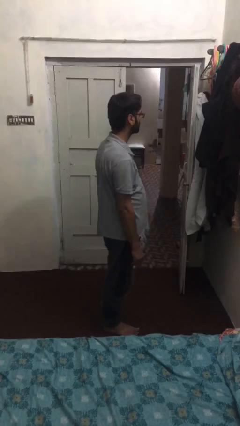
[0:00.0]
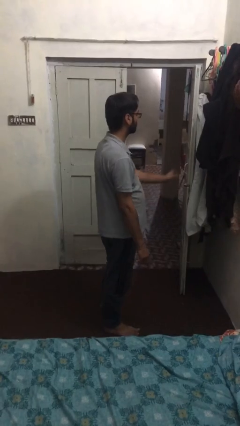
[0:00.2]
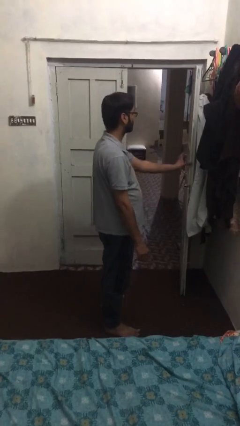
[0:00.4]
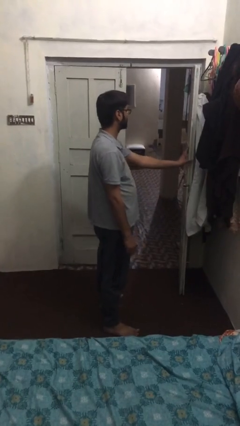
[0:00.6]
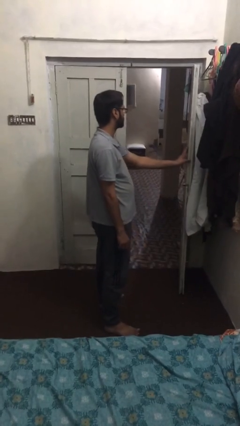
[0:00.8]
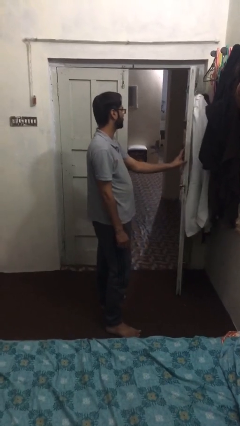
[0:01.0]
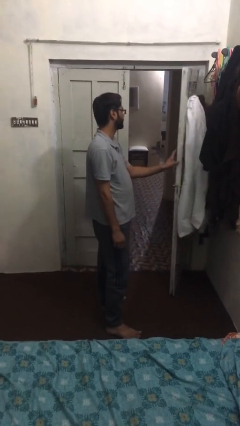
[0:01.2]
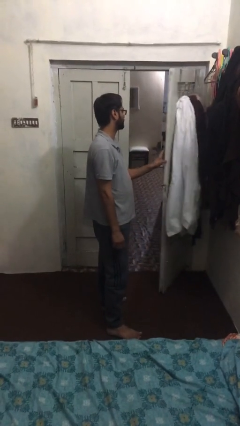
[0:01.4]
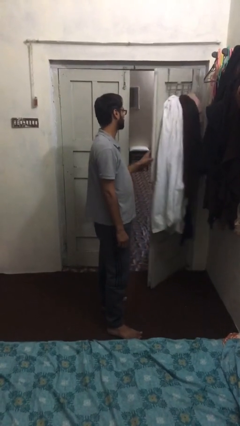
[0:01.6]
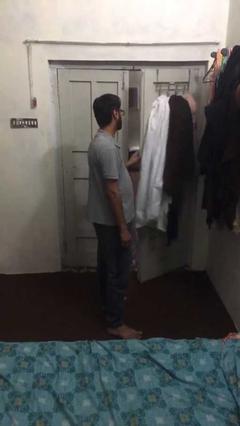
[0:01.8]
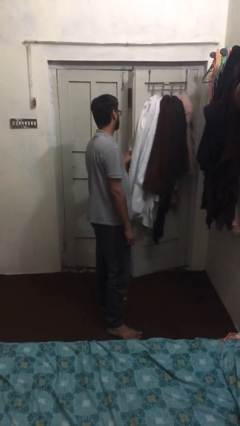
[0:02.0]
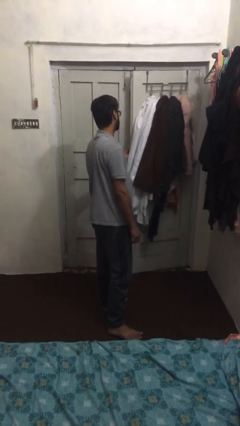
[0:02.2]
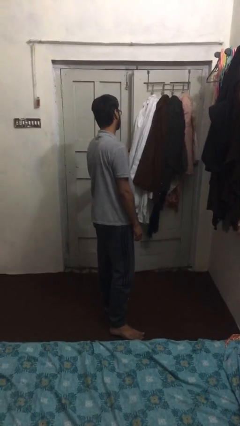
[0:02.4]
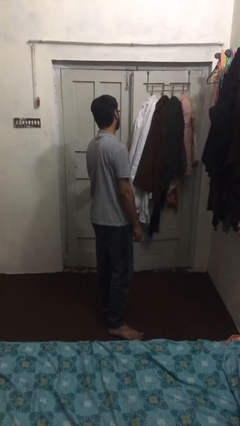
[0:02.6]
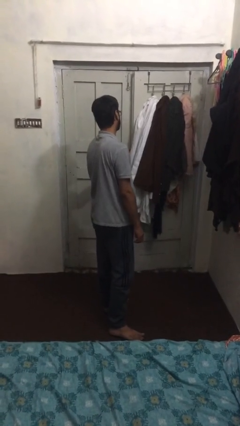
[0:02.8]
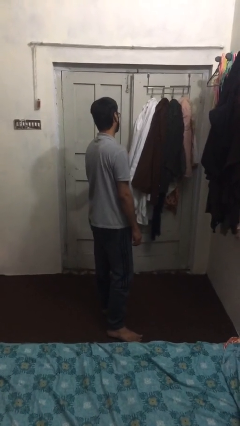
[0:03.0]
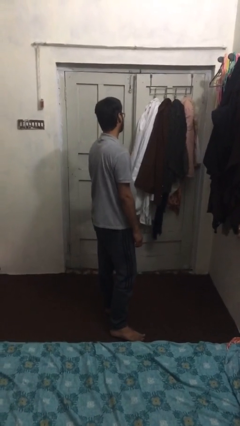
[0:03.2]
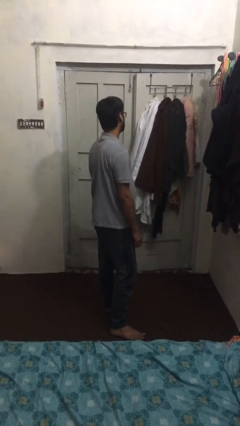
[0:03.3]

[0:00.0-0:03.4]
person closes facility door

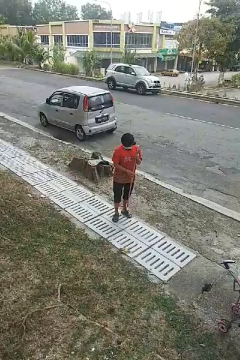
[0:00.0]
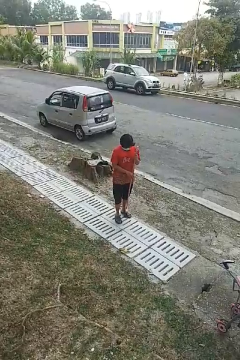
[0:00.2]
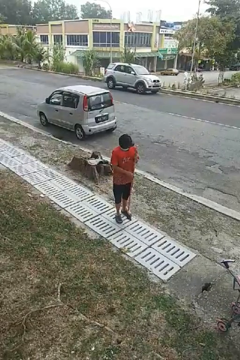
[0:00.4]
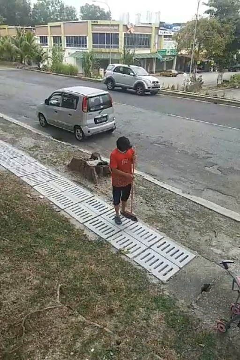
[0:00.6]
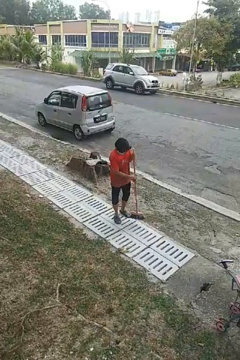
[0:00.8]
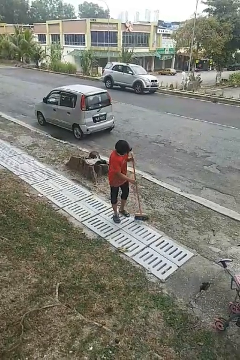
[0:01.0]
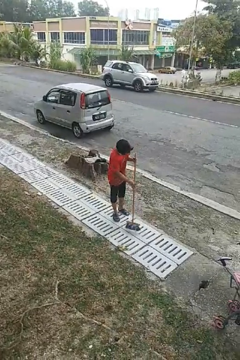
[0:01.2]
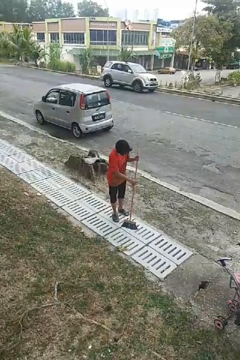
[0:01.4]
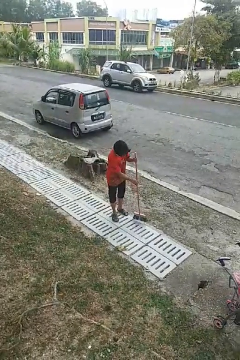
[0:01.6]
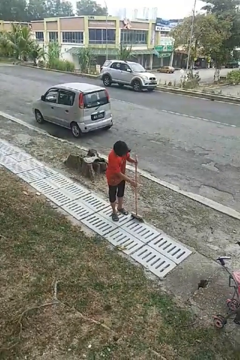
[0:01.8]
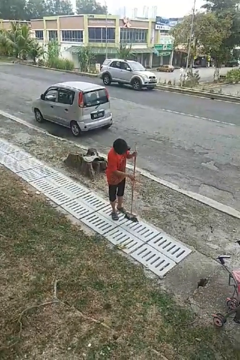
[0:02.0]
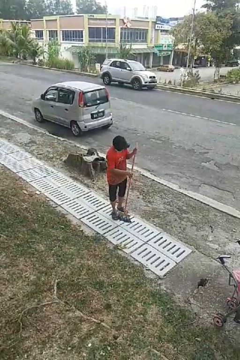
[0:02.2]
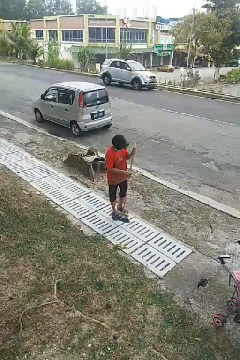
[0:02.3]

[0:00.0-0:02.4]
person sweeps floor

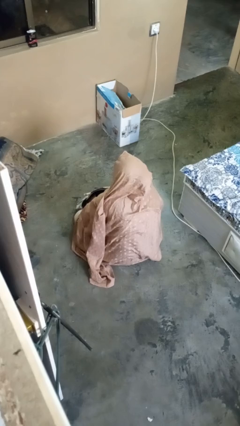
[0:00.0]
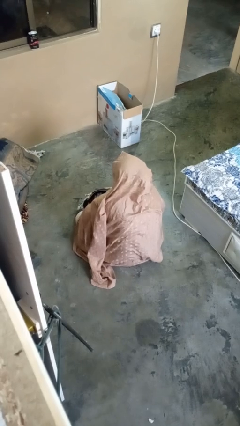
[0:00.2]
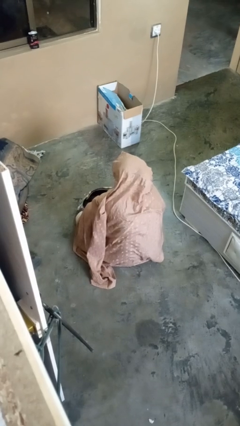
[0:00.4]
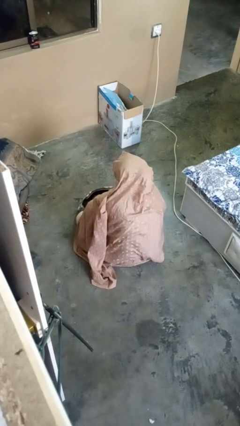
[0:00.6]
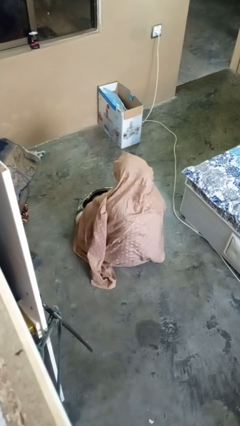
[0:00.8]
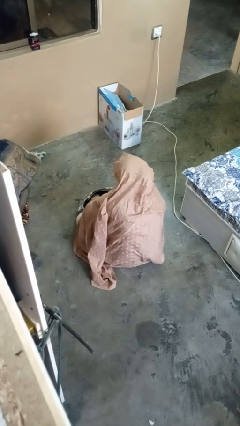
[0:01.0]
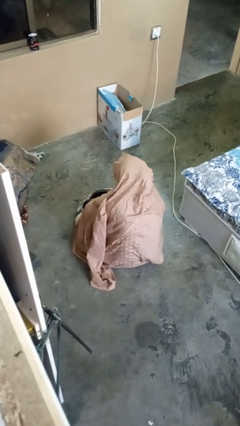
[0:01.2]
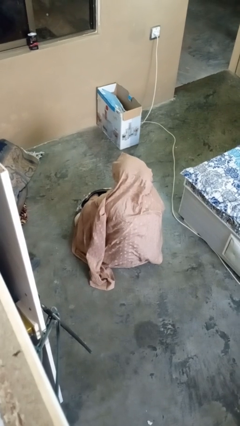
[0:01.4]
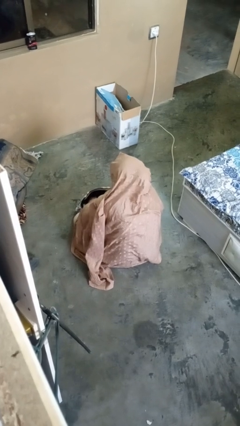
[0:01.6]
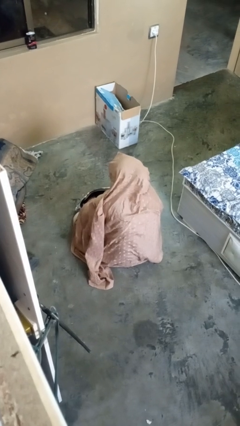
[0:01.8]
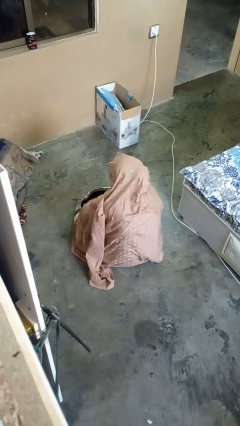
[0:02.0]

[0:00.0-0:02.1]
person searches in purse

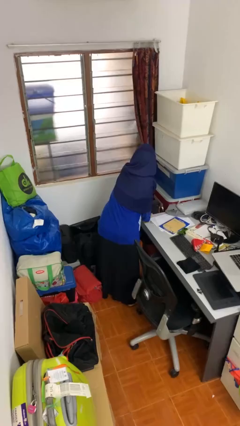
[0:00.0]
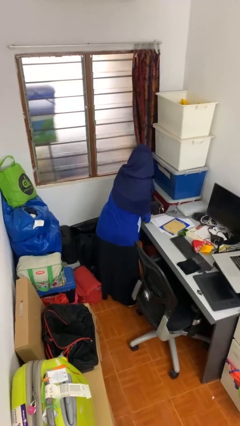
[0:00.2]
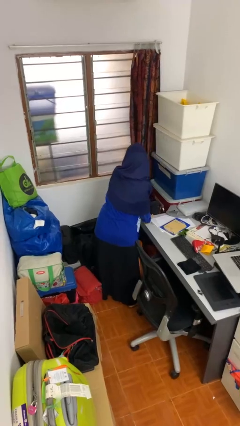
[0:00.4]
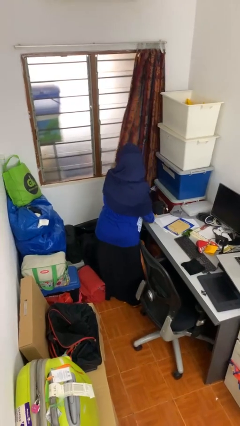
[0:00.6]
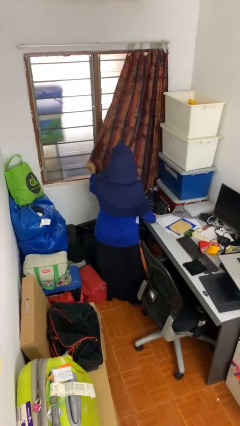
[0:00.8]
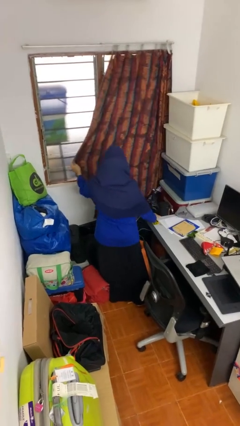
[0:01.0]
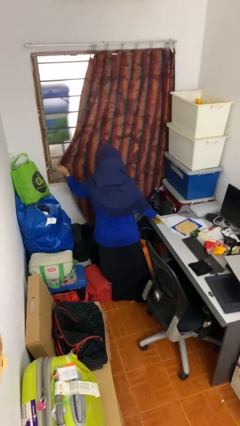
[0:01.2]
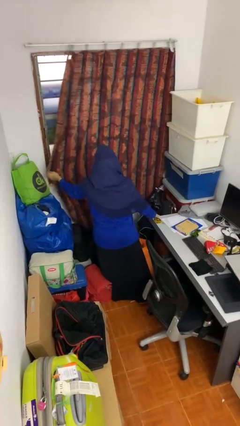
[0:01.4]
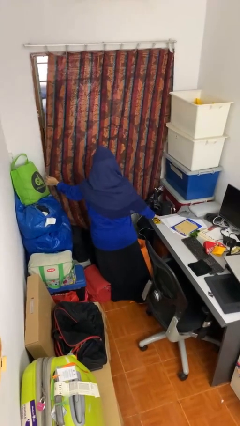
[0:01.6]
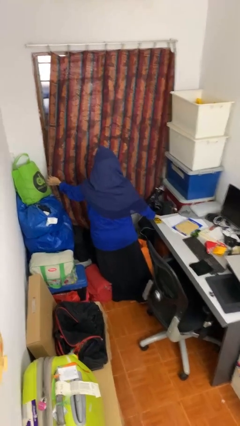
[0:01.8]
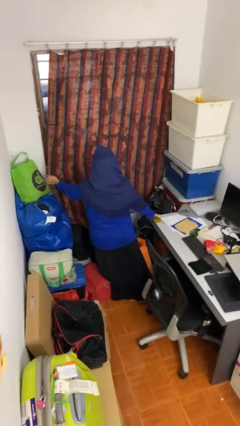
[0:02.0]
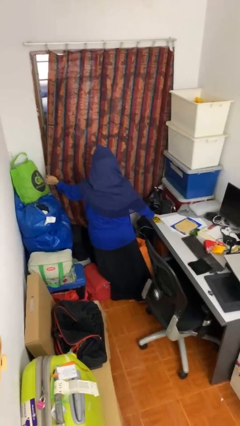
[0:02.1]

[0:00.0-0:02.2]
person closes curtains

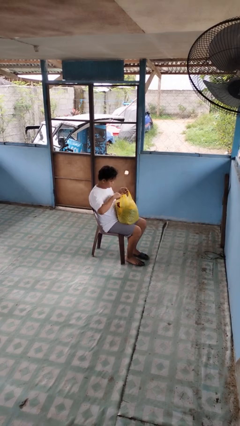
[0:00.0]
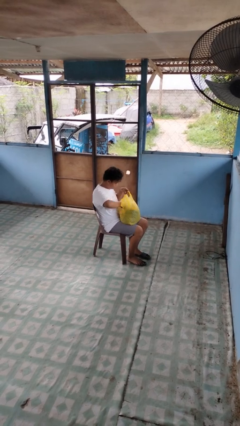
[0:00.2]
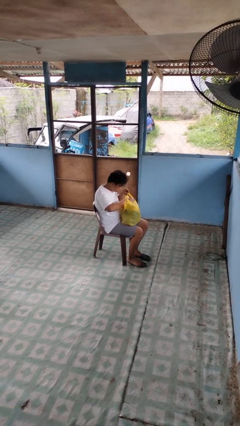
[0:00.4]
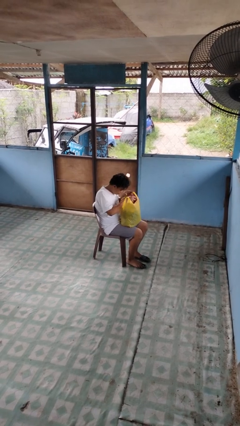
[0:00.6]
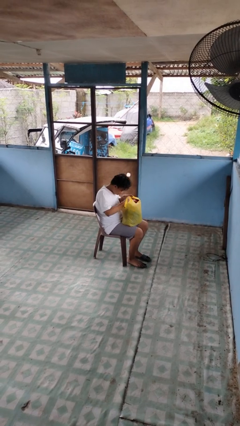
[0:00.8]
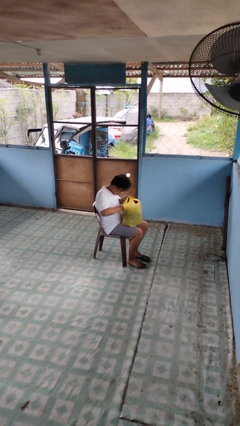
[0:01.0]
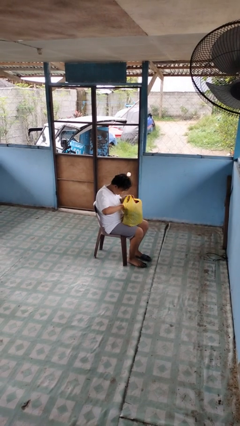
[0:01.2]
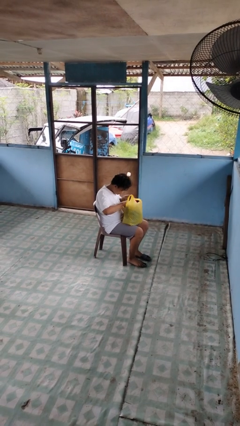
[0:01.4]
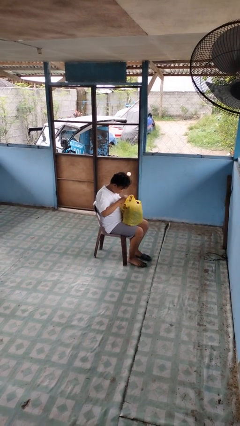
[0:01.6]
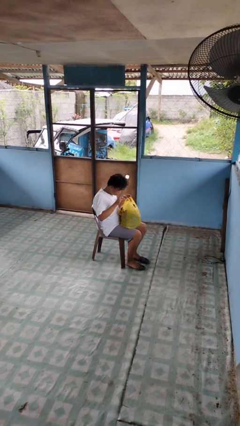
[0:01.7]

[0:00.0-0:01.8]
person searches in bag

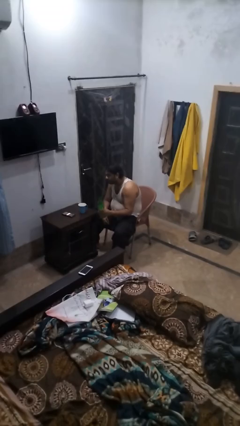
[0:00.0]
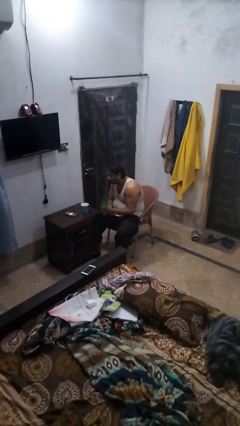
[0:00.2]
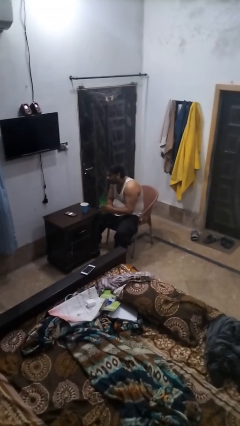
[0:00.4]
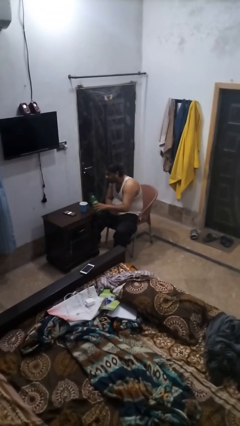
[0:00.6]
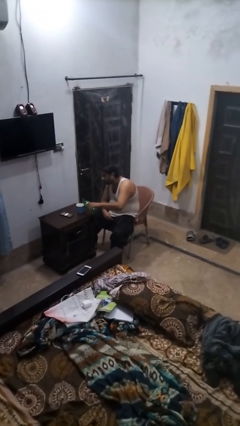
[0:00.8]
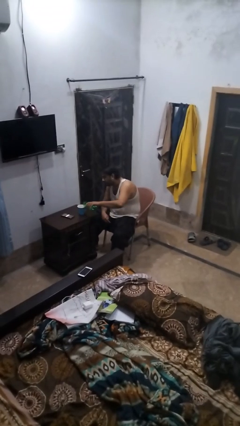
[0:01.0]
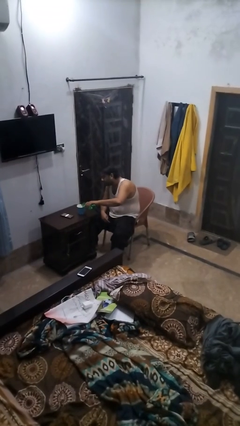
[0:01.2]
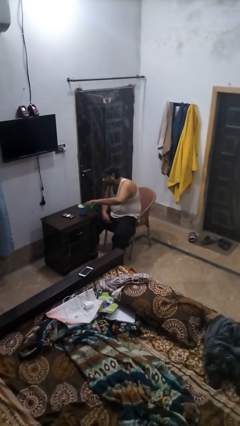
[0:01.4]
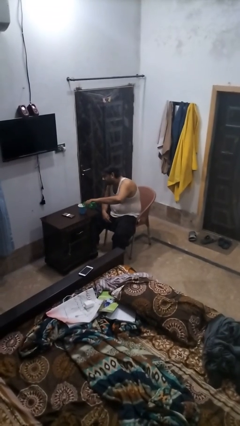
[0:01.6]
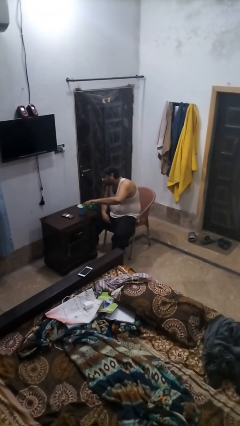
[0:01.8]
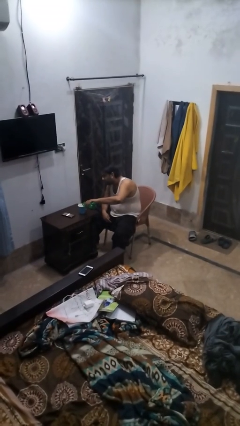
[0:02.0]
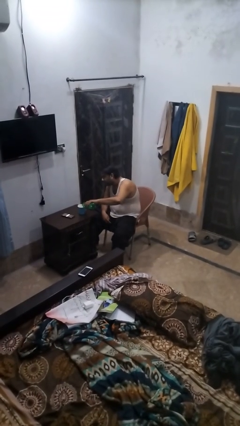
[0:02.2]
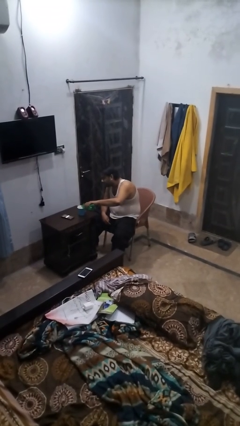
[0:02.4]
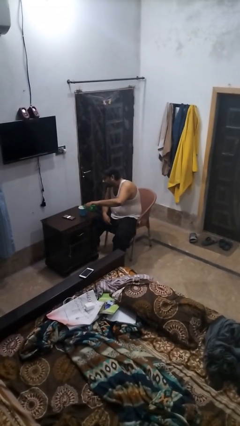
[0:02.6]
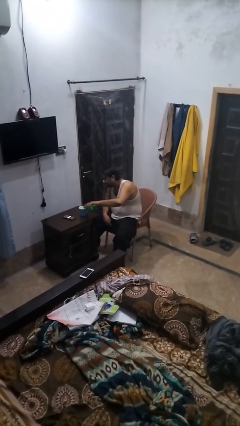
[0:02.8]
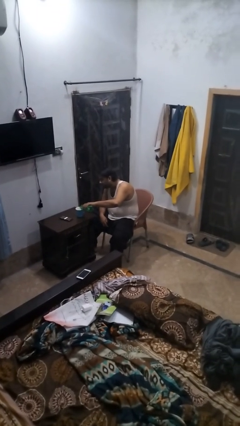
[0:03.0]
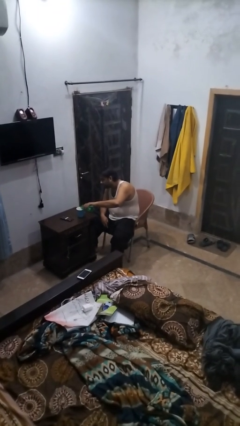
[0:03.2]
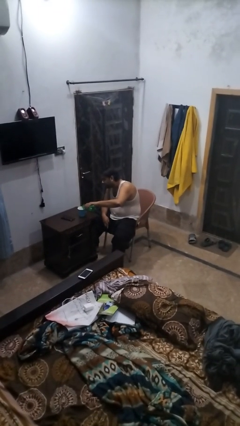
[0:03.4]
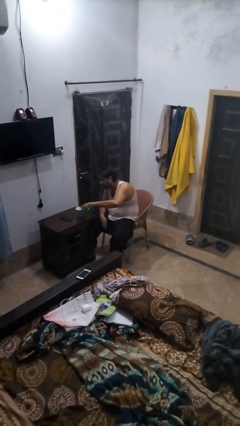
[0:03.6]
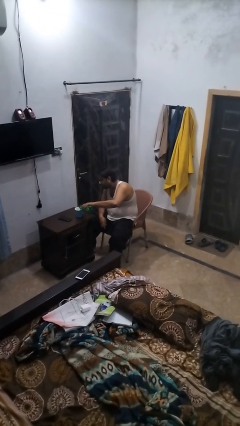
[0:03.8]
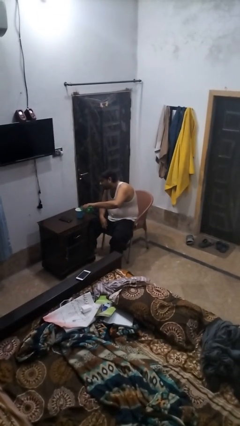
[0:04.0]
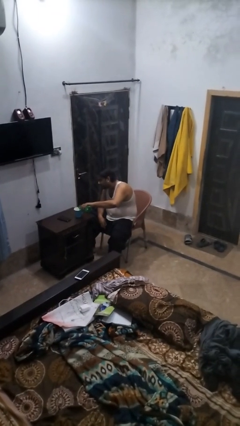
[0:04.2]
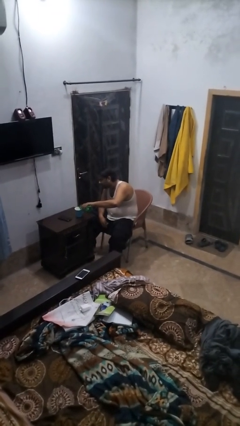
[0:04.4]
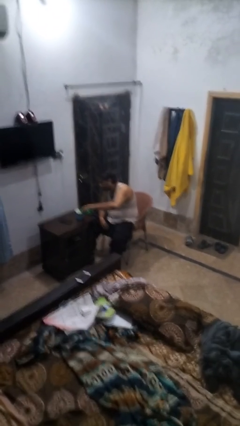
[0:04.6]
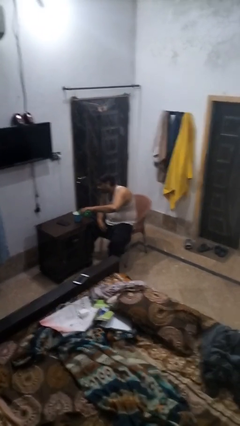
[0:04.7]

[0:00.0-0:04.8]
person pours liquid into cup

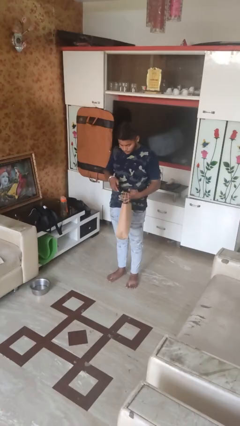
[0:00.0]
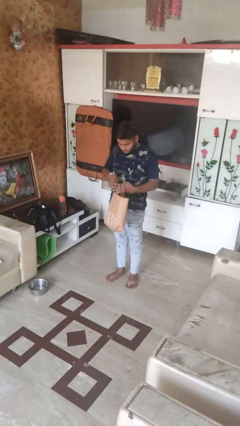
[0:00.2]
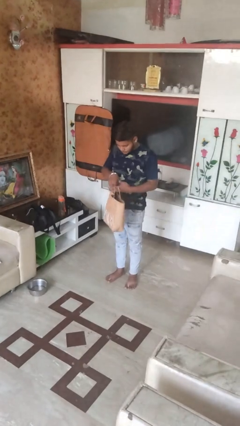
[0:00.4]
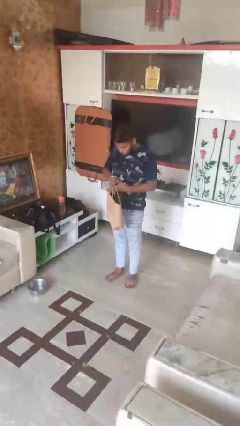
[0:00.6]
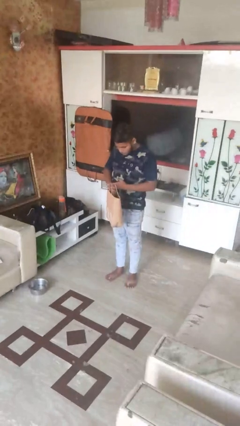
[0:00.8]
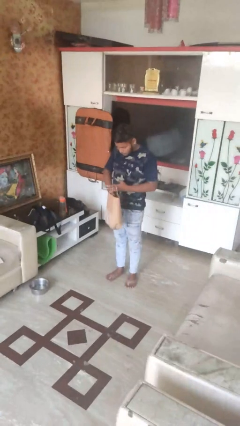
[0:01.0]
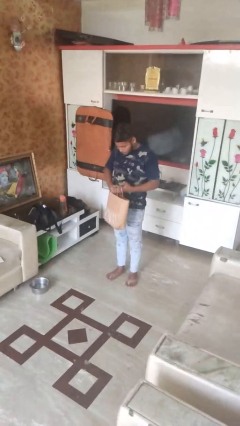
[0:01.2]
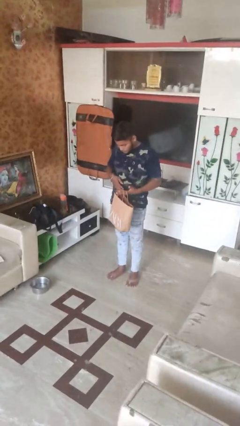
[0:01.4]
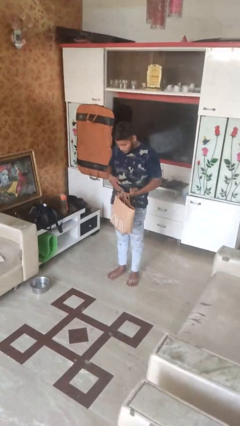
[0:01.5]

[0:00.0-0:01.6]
person puts object into bag
